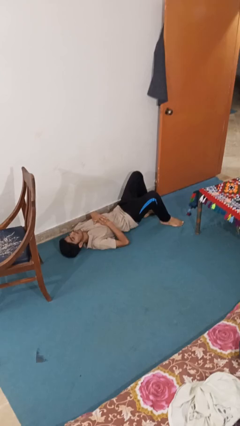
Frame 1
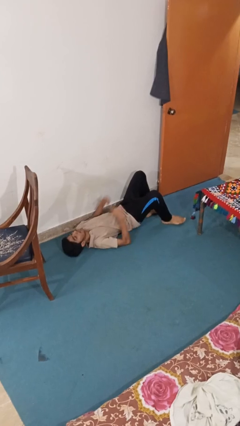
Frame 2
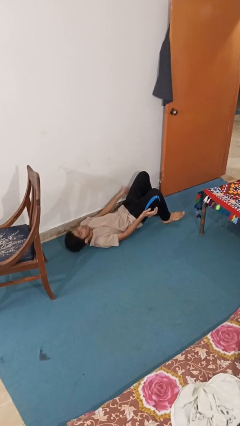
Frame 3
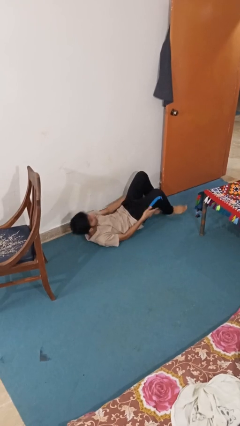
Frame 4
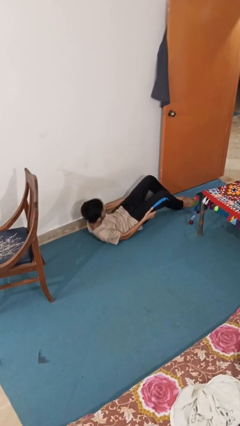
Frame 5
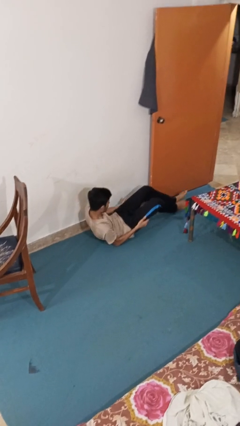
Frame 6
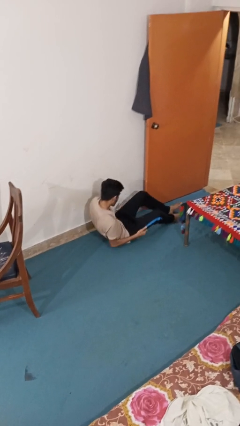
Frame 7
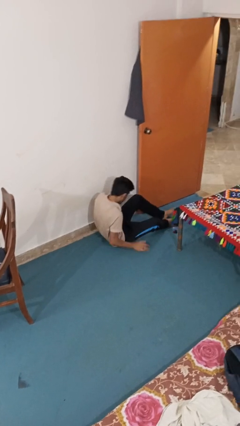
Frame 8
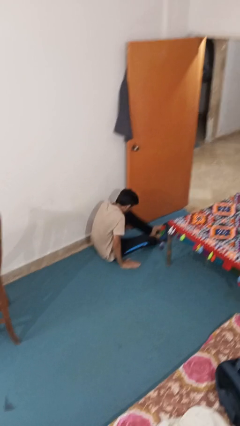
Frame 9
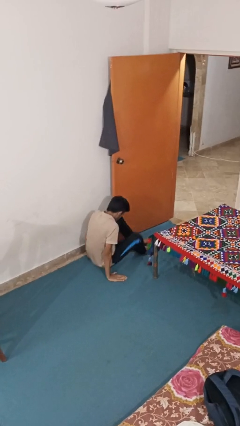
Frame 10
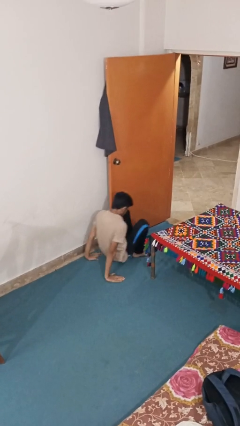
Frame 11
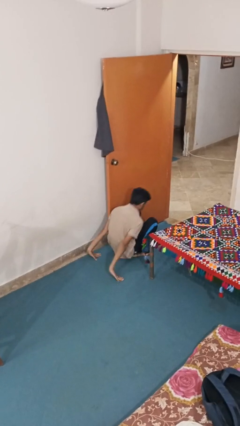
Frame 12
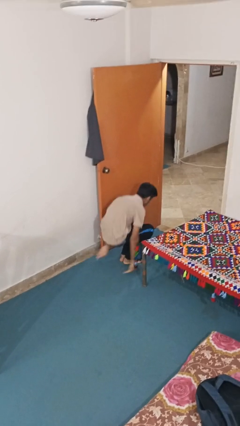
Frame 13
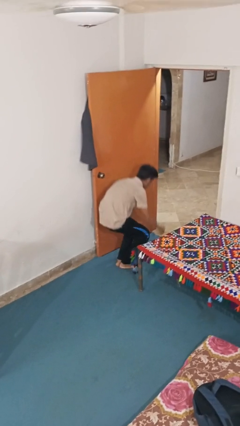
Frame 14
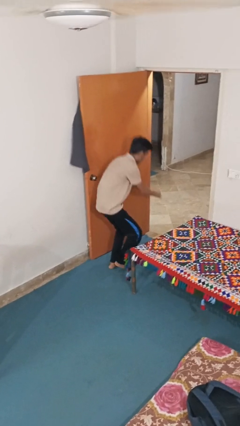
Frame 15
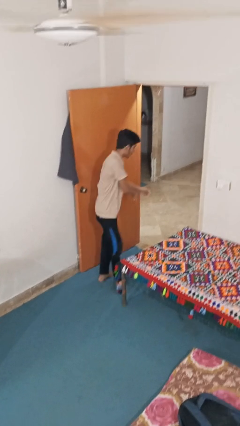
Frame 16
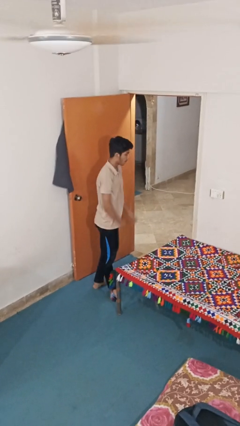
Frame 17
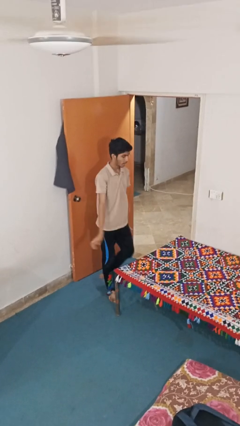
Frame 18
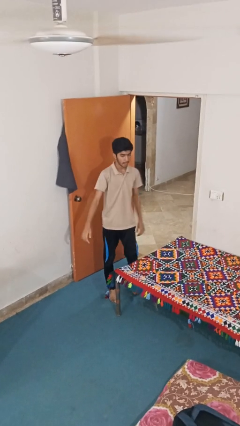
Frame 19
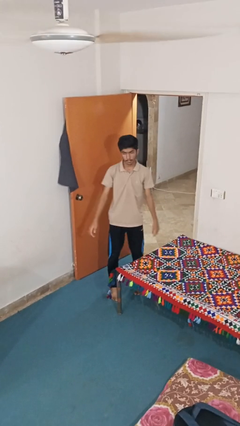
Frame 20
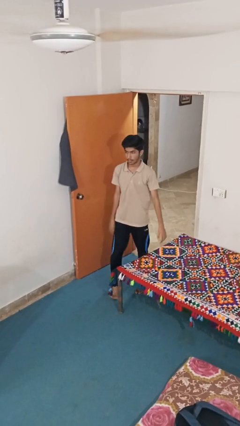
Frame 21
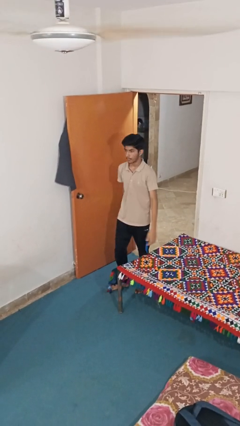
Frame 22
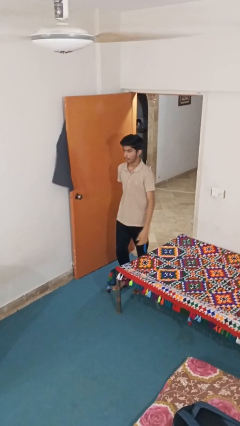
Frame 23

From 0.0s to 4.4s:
person stands up from floor

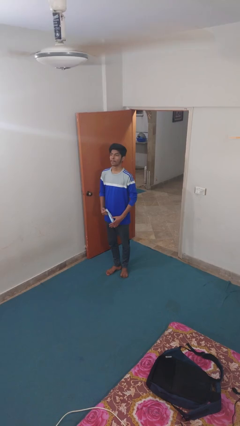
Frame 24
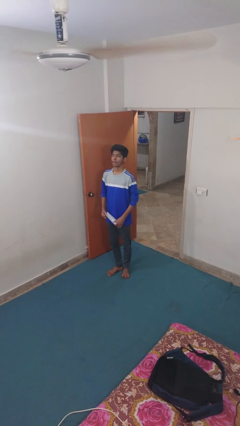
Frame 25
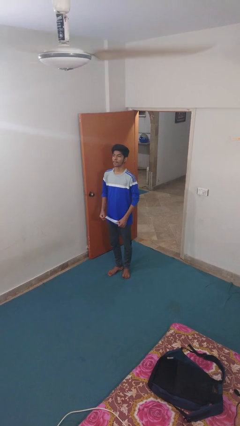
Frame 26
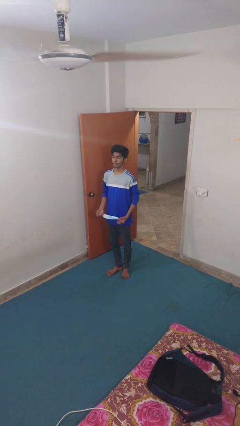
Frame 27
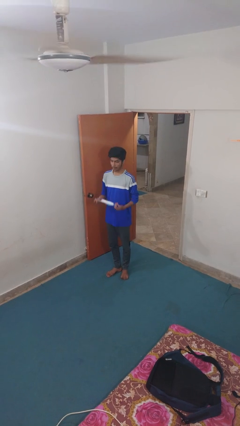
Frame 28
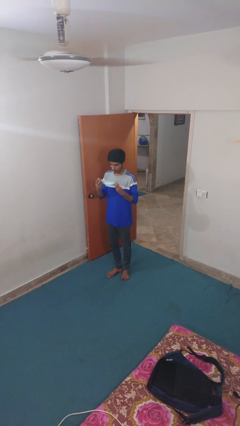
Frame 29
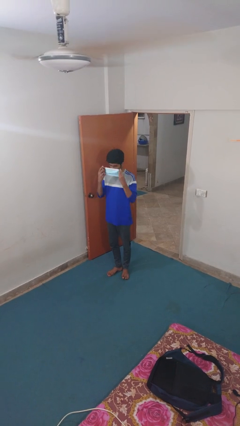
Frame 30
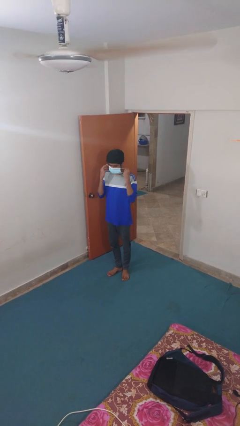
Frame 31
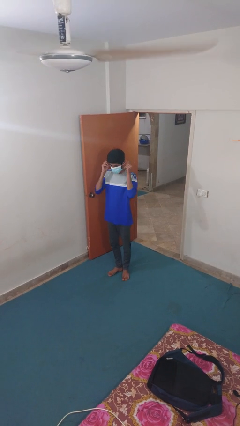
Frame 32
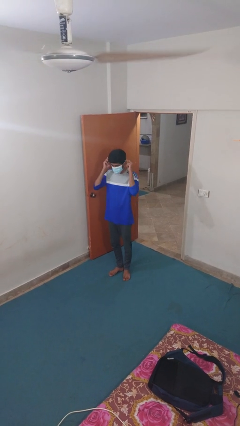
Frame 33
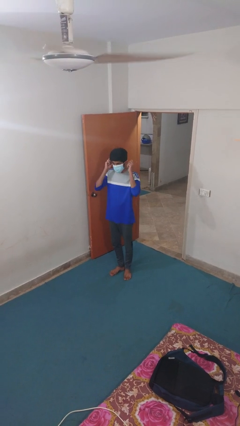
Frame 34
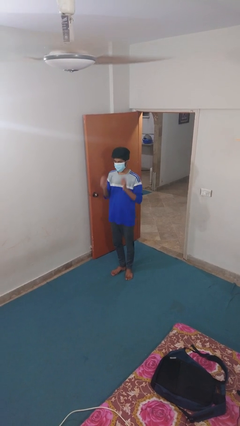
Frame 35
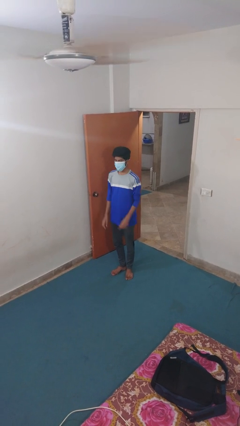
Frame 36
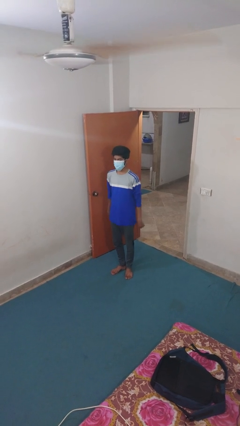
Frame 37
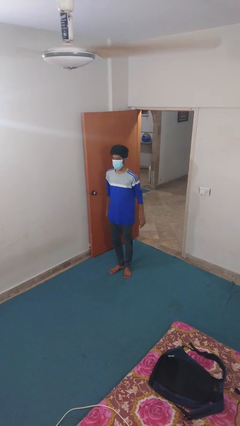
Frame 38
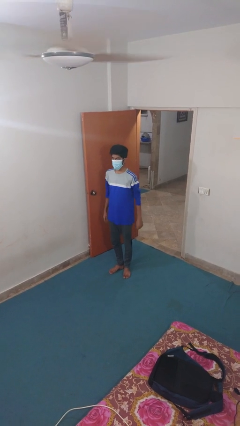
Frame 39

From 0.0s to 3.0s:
person puts on facemask

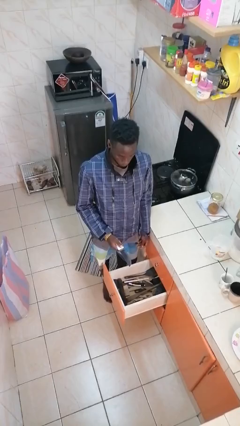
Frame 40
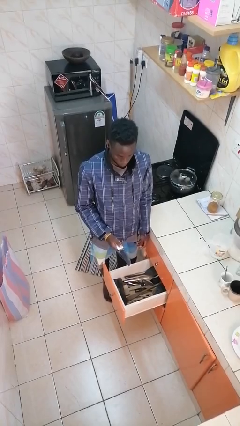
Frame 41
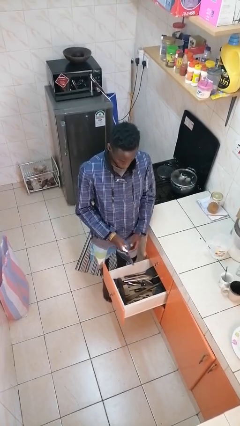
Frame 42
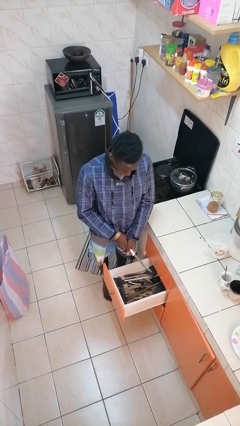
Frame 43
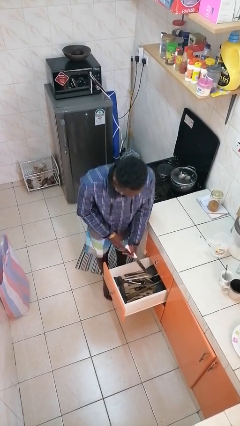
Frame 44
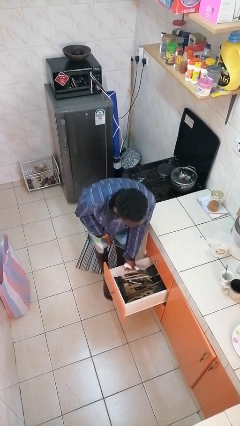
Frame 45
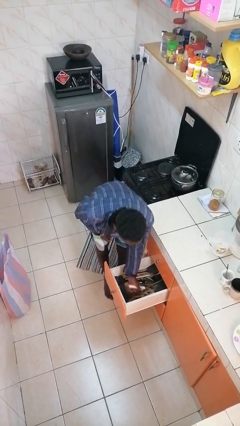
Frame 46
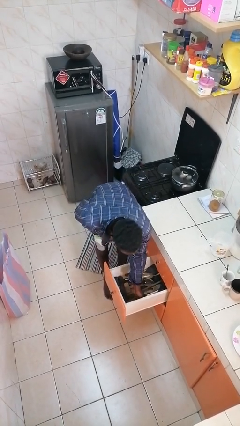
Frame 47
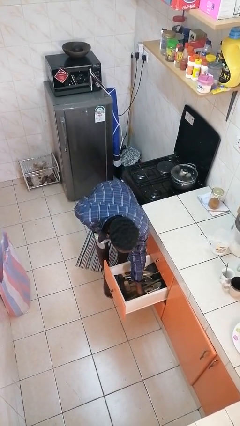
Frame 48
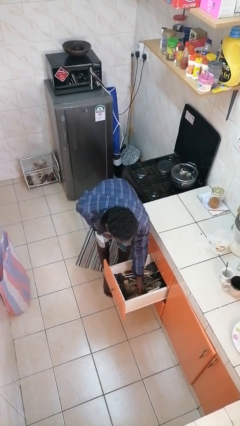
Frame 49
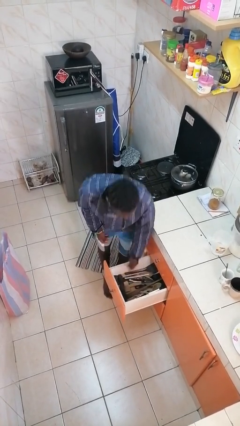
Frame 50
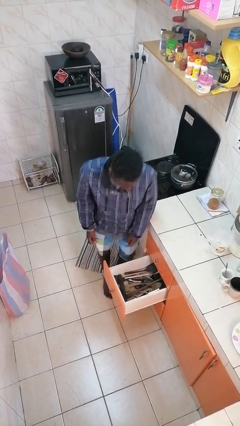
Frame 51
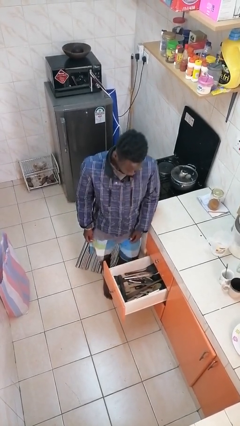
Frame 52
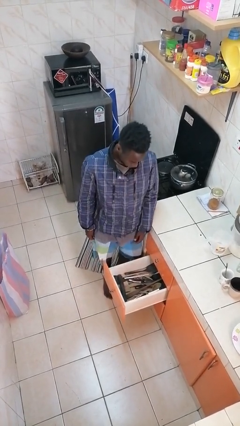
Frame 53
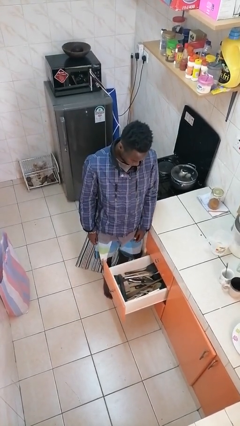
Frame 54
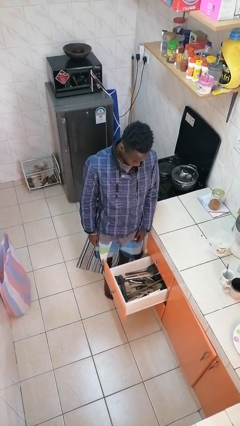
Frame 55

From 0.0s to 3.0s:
person puts object into kitchen drawer

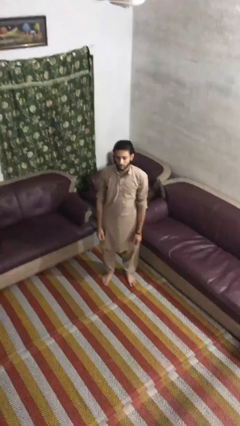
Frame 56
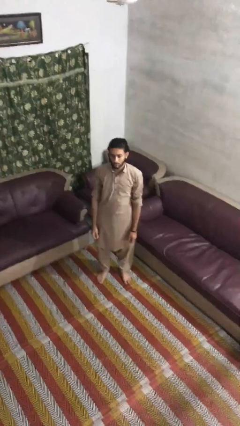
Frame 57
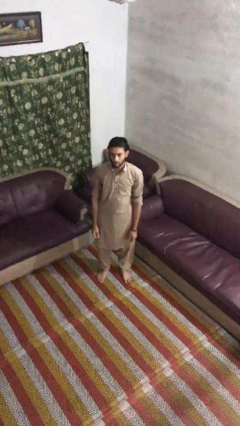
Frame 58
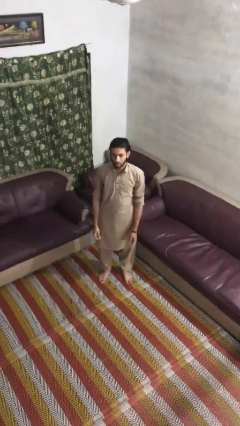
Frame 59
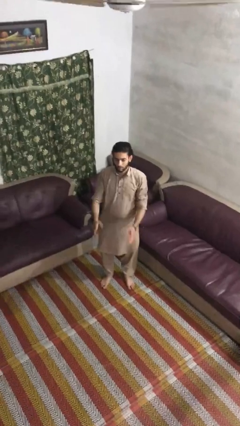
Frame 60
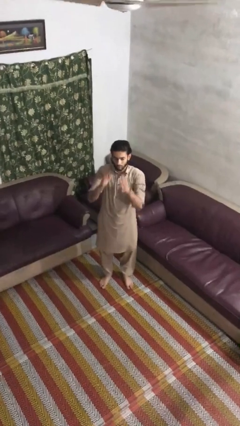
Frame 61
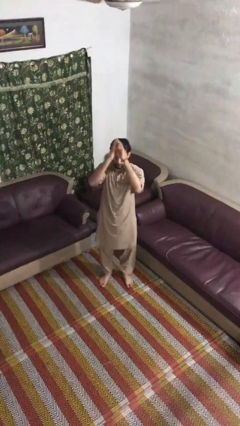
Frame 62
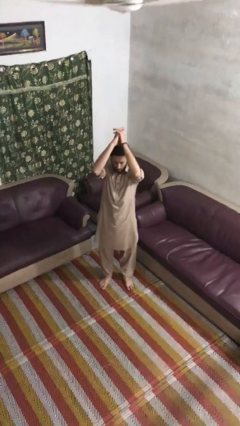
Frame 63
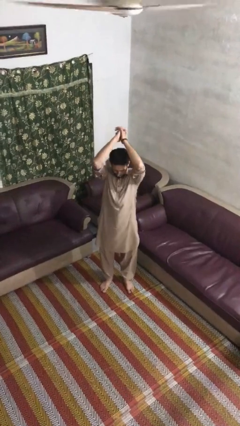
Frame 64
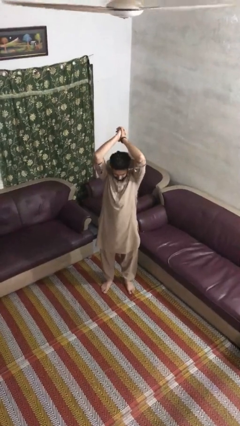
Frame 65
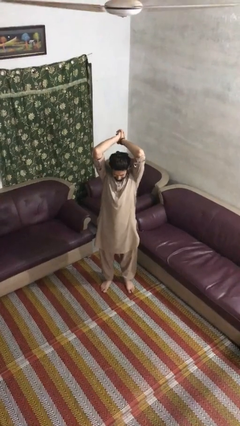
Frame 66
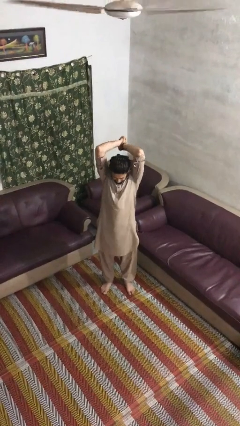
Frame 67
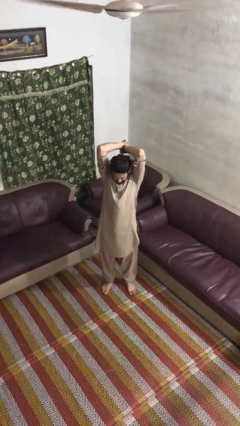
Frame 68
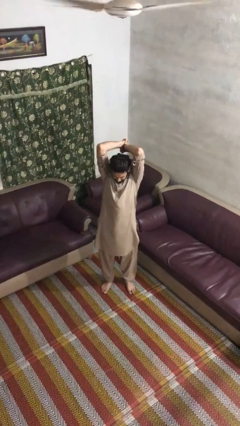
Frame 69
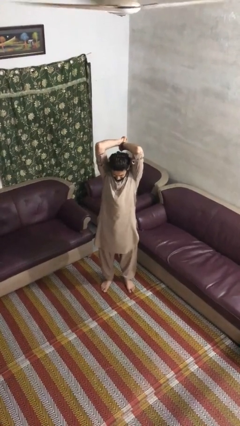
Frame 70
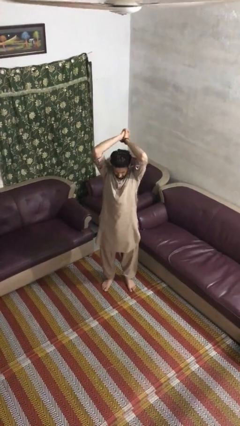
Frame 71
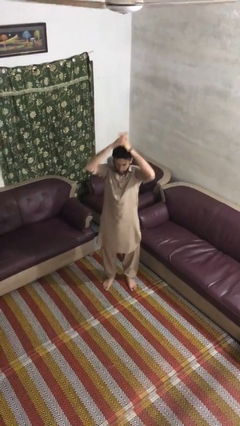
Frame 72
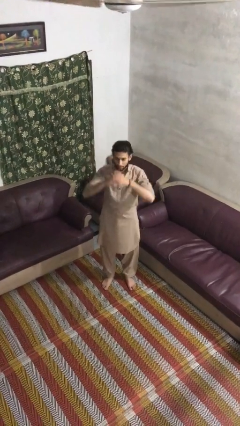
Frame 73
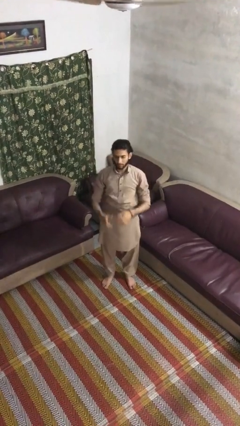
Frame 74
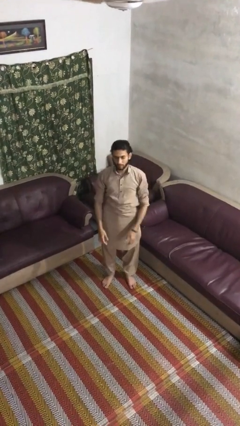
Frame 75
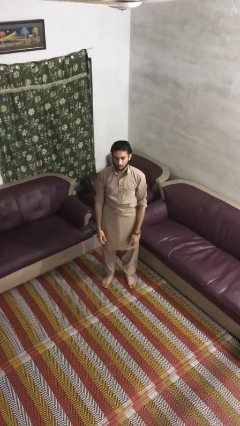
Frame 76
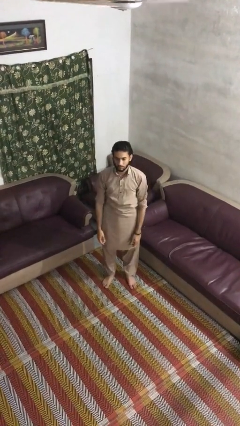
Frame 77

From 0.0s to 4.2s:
person stretches arms over head

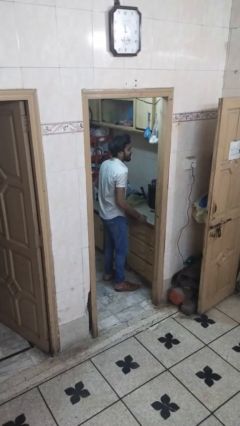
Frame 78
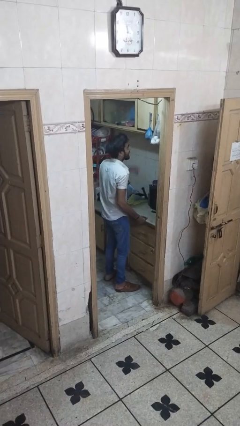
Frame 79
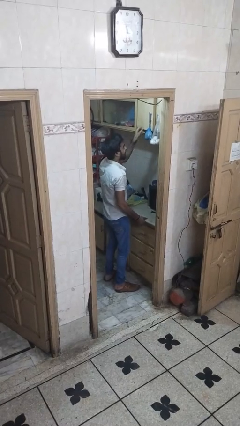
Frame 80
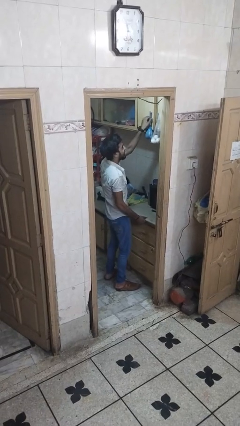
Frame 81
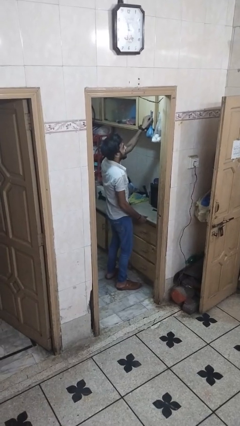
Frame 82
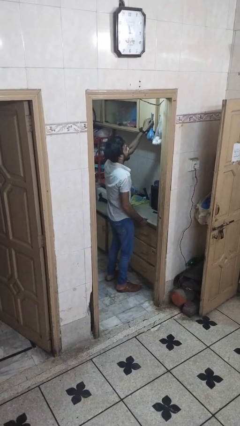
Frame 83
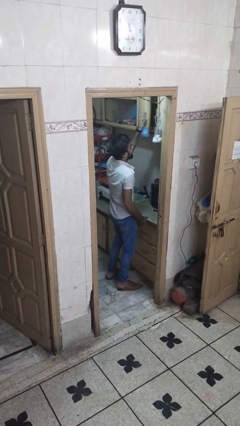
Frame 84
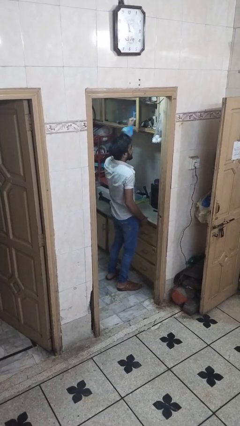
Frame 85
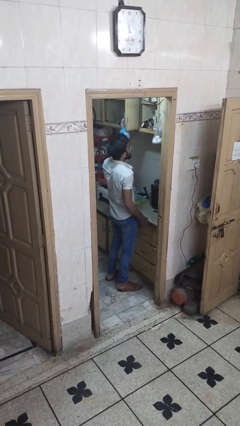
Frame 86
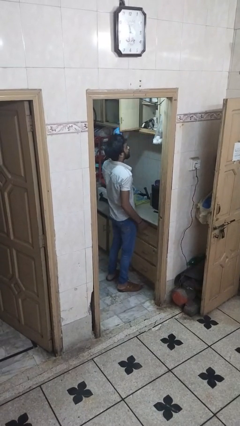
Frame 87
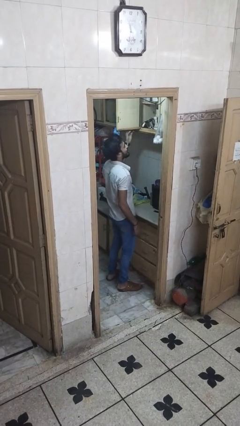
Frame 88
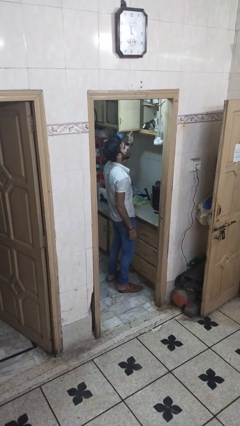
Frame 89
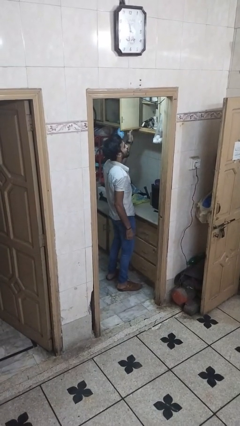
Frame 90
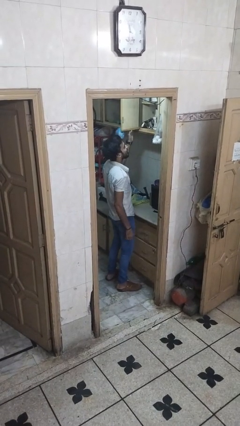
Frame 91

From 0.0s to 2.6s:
person opens cabinet
